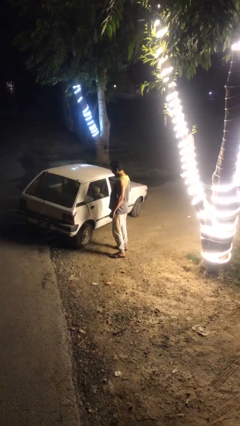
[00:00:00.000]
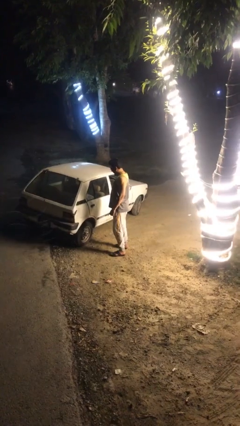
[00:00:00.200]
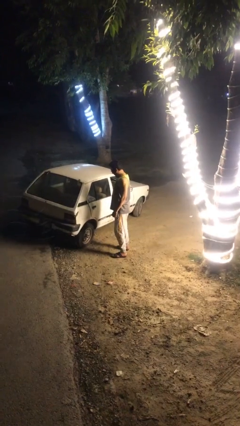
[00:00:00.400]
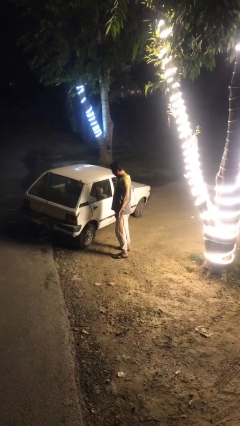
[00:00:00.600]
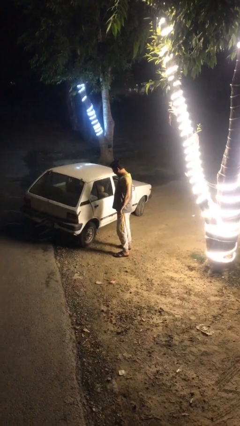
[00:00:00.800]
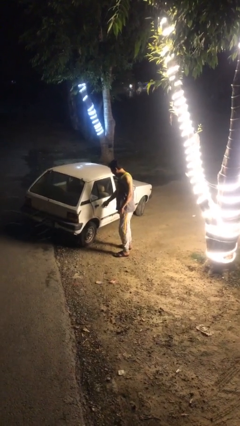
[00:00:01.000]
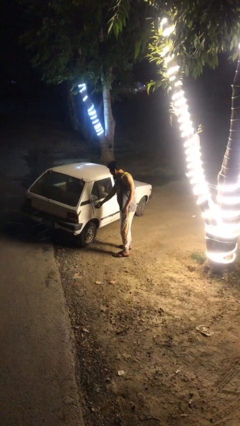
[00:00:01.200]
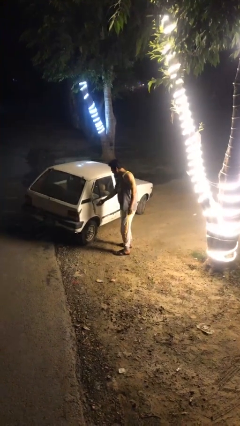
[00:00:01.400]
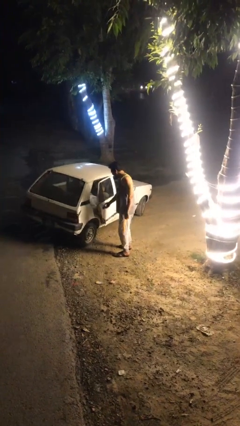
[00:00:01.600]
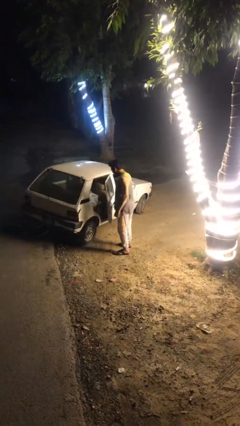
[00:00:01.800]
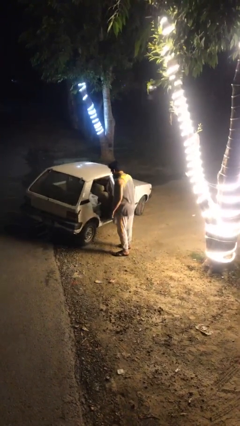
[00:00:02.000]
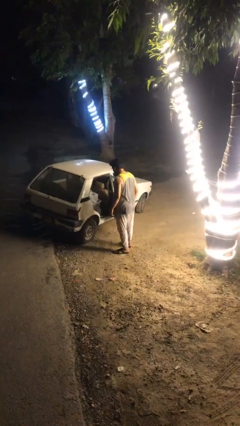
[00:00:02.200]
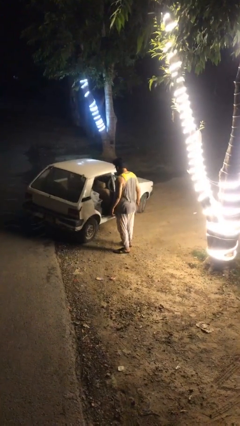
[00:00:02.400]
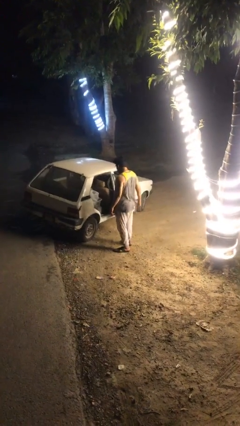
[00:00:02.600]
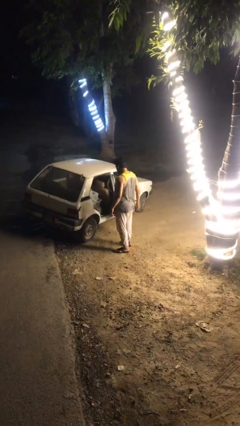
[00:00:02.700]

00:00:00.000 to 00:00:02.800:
person opens car door

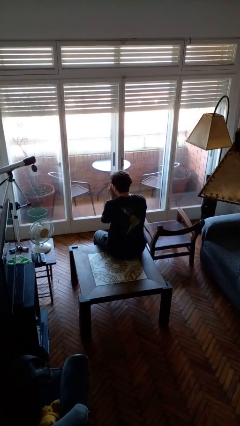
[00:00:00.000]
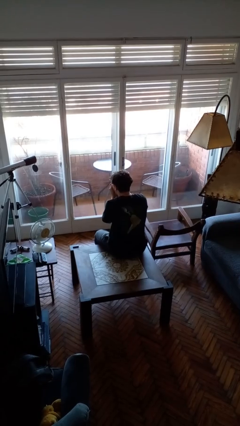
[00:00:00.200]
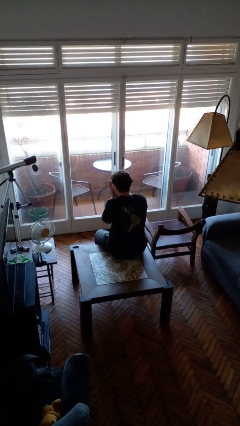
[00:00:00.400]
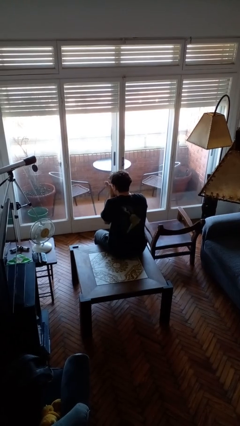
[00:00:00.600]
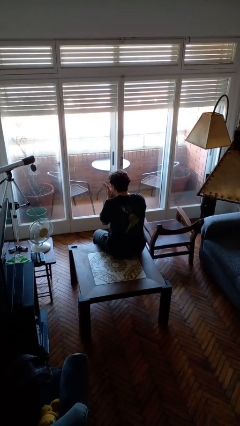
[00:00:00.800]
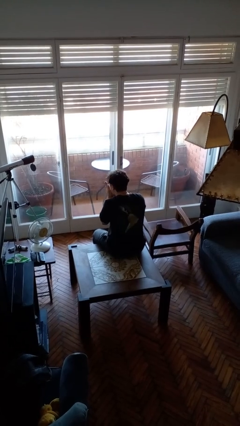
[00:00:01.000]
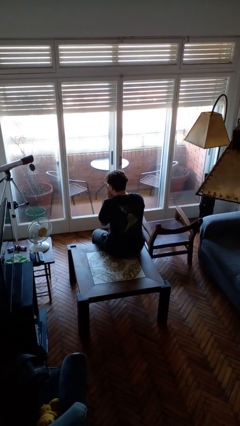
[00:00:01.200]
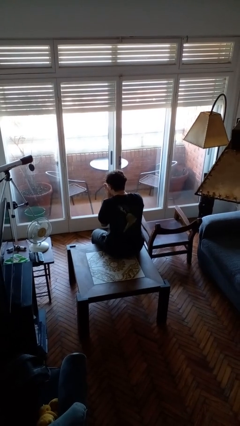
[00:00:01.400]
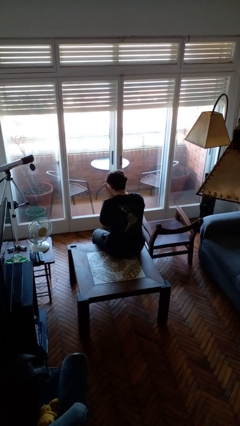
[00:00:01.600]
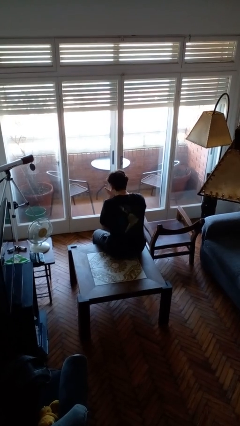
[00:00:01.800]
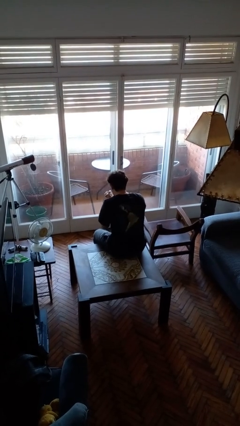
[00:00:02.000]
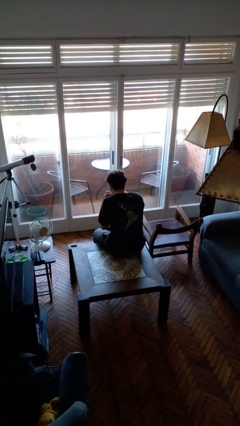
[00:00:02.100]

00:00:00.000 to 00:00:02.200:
person blows into hands

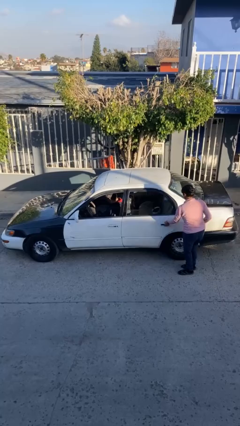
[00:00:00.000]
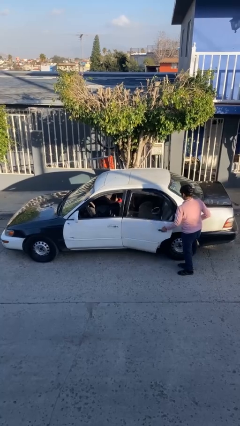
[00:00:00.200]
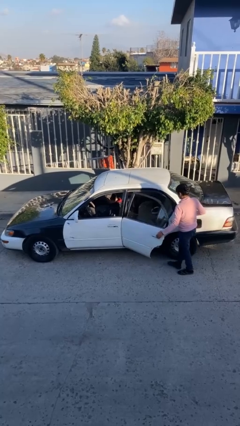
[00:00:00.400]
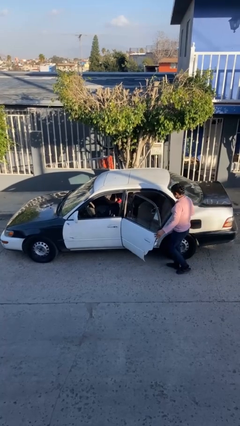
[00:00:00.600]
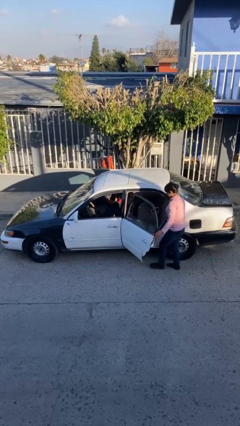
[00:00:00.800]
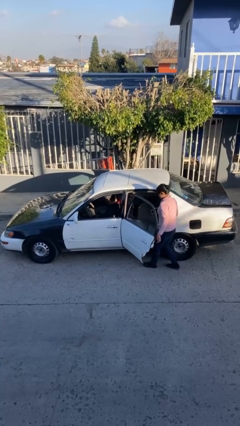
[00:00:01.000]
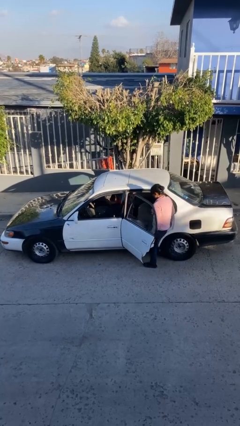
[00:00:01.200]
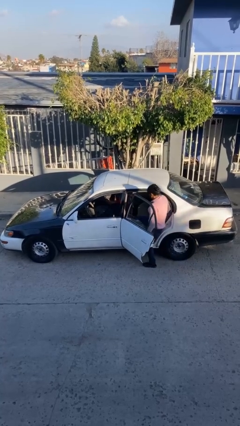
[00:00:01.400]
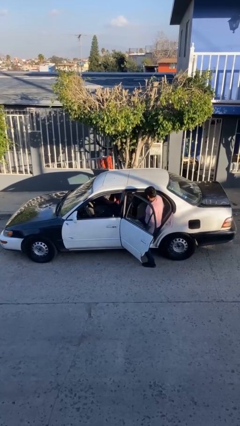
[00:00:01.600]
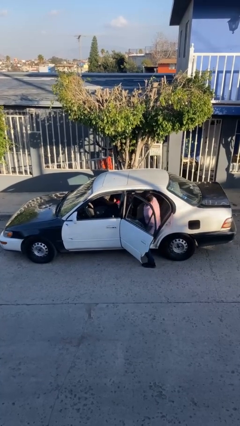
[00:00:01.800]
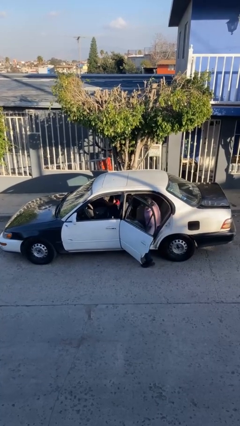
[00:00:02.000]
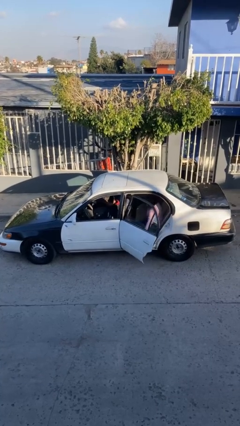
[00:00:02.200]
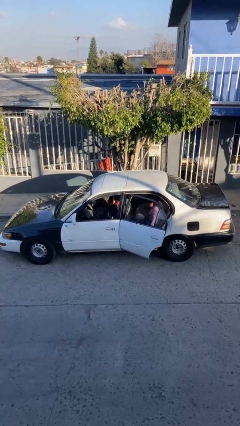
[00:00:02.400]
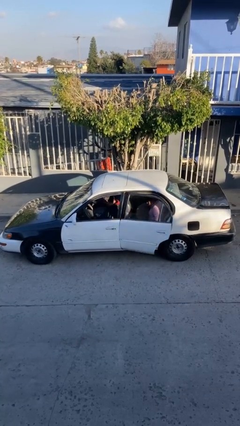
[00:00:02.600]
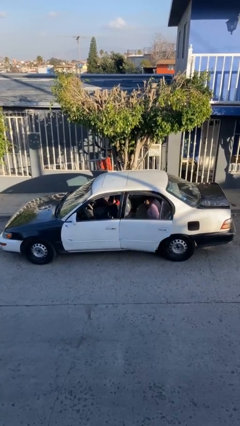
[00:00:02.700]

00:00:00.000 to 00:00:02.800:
car picks up person

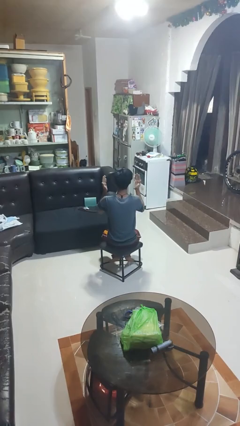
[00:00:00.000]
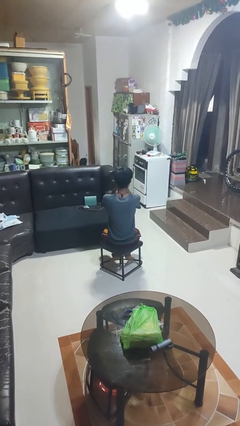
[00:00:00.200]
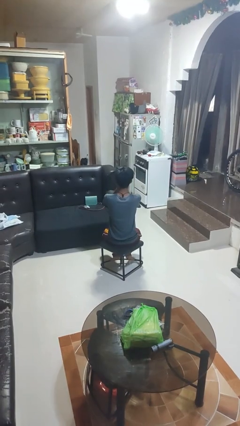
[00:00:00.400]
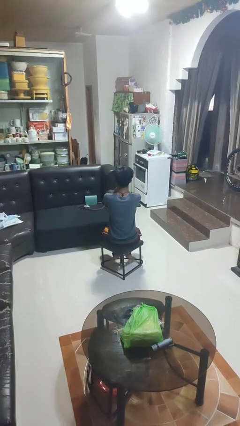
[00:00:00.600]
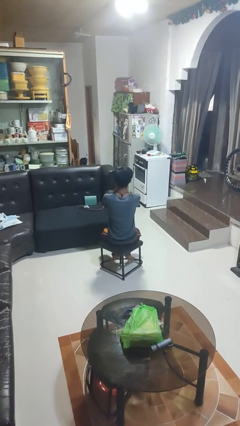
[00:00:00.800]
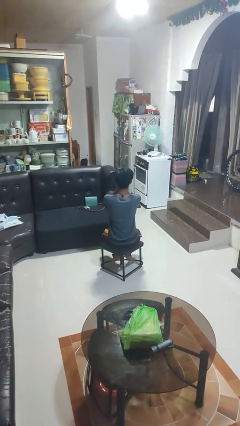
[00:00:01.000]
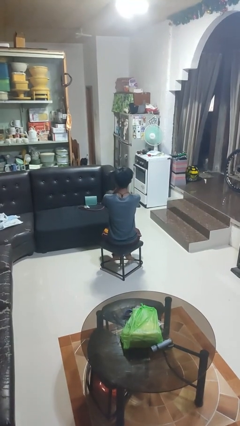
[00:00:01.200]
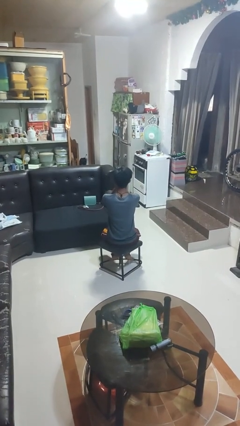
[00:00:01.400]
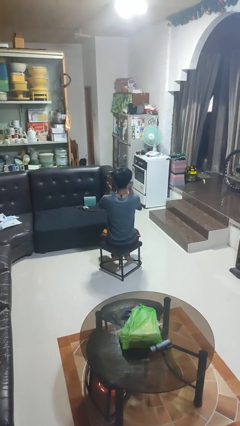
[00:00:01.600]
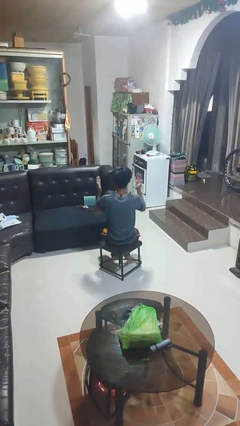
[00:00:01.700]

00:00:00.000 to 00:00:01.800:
person covers face with hands

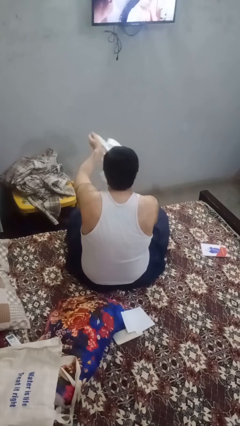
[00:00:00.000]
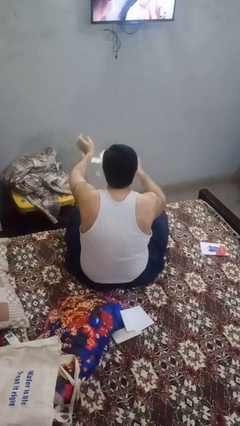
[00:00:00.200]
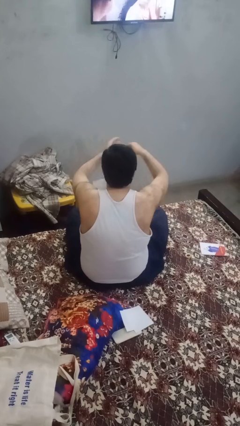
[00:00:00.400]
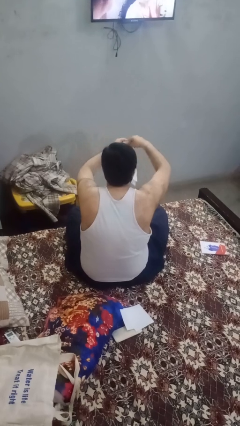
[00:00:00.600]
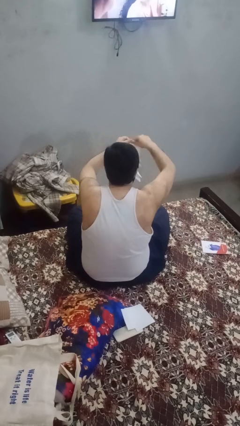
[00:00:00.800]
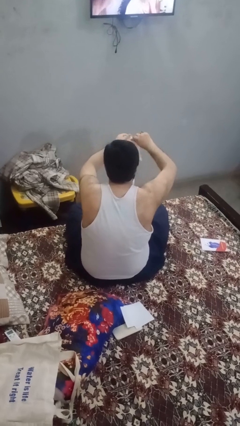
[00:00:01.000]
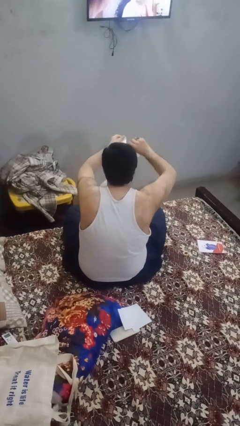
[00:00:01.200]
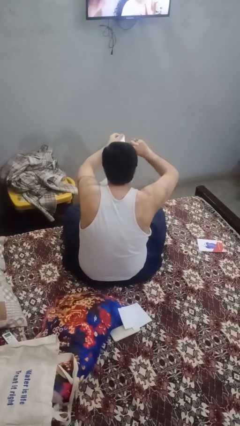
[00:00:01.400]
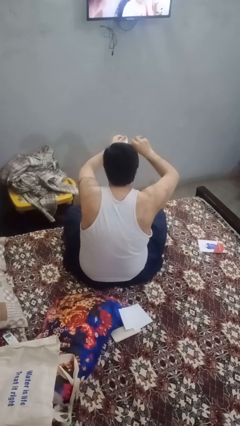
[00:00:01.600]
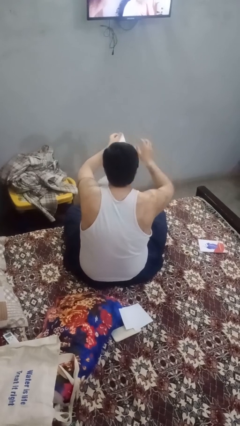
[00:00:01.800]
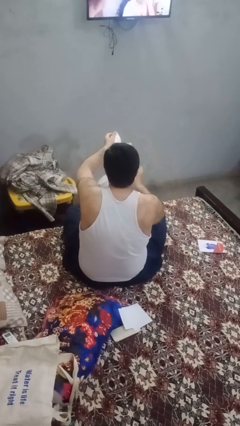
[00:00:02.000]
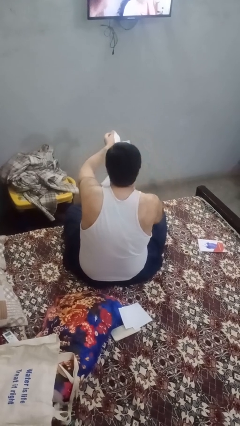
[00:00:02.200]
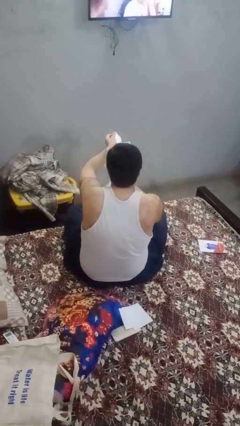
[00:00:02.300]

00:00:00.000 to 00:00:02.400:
person tears paper

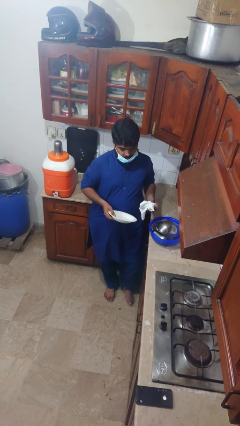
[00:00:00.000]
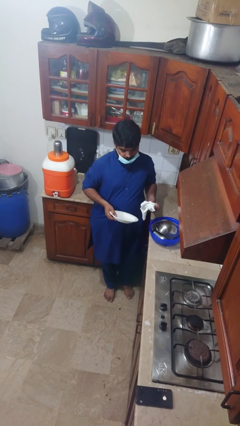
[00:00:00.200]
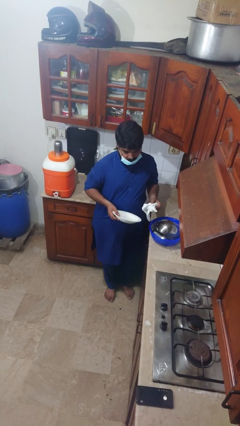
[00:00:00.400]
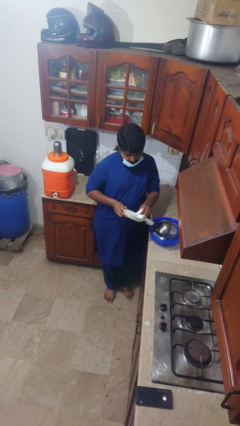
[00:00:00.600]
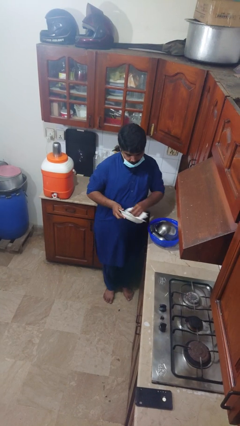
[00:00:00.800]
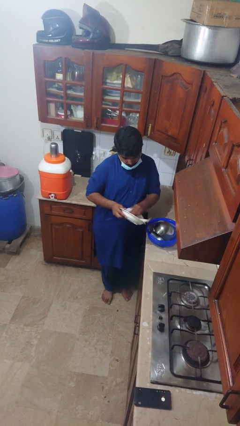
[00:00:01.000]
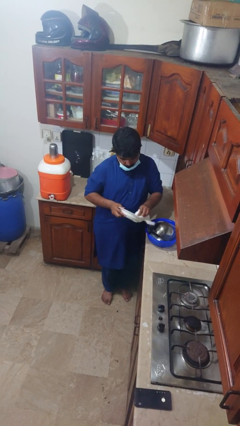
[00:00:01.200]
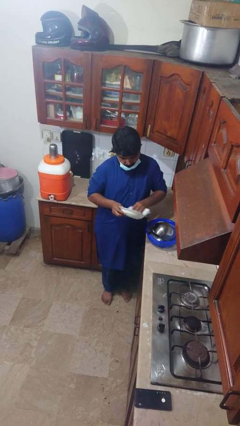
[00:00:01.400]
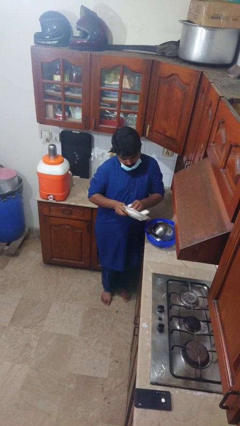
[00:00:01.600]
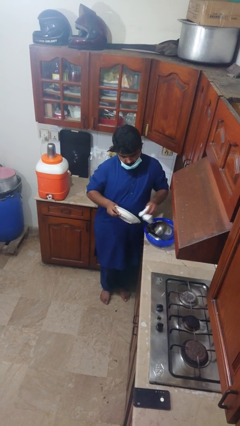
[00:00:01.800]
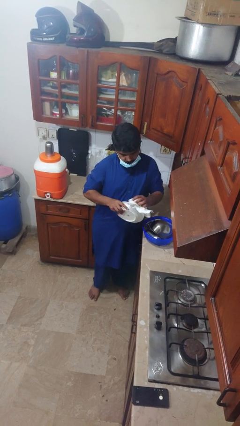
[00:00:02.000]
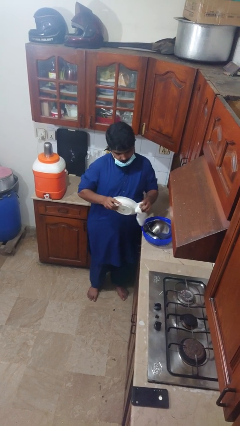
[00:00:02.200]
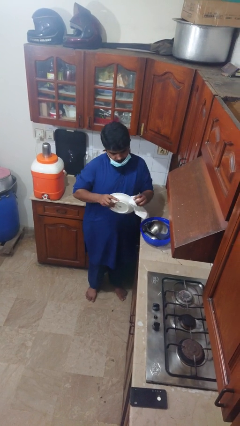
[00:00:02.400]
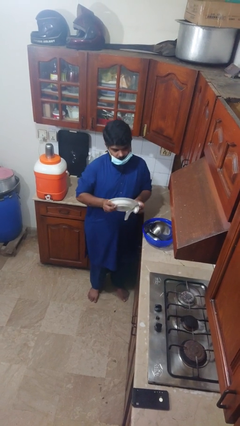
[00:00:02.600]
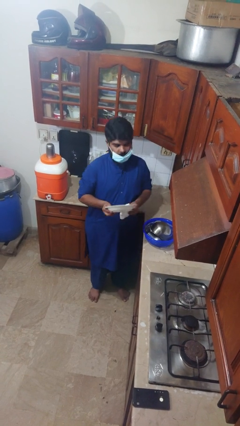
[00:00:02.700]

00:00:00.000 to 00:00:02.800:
person dries dish

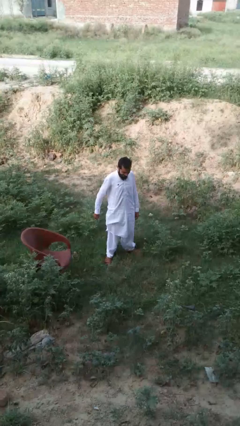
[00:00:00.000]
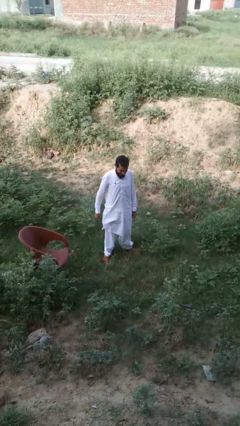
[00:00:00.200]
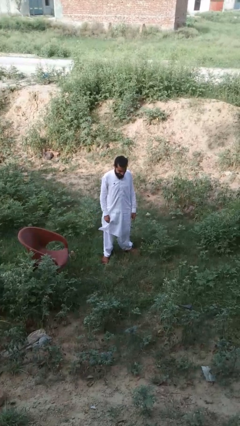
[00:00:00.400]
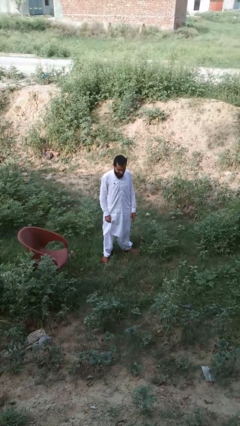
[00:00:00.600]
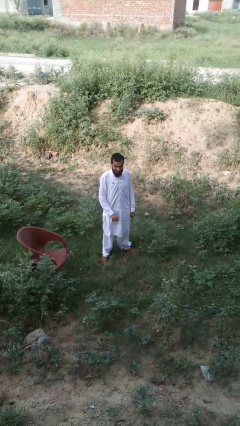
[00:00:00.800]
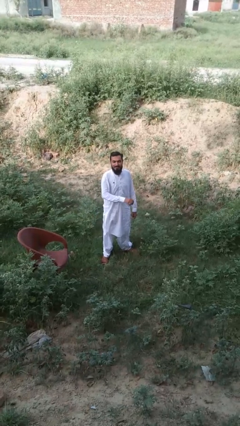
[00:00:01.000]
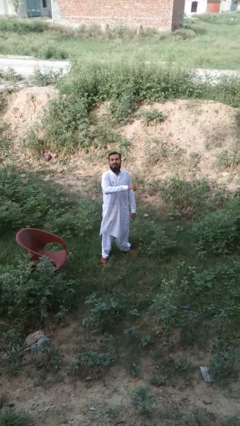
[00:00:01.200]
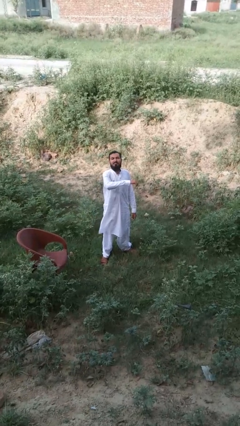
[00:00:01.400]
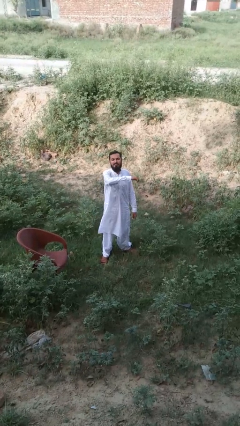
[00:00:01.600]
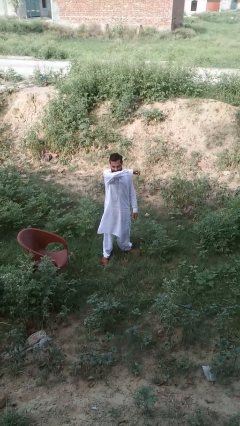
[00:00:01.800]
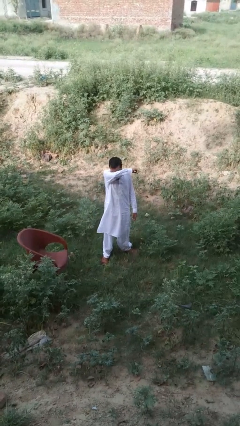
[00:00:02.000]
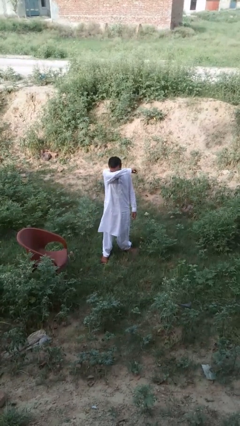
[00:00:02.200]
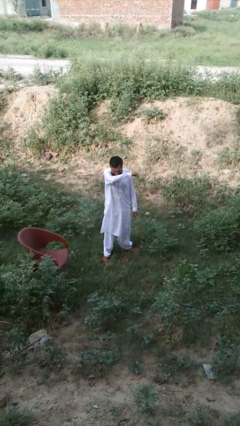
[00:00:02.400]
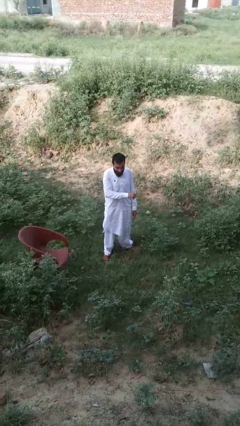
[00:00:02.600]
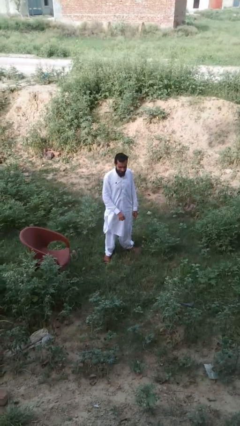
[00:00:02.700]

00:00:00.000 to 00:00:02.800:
person sneezes into arm
